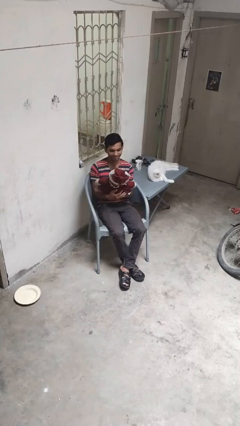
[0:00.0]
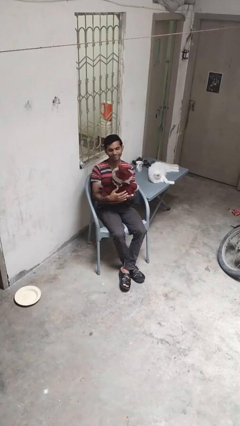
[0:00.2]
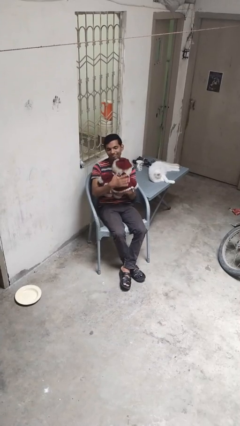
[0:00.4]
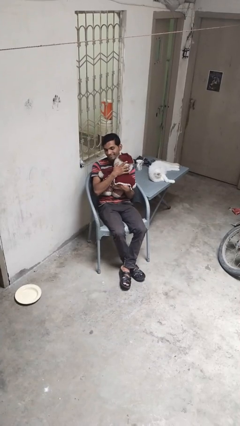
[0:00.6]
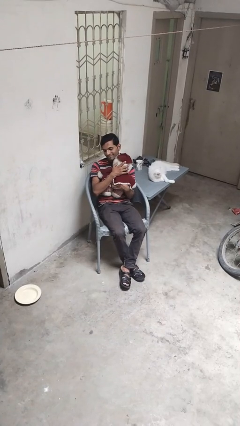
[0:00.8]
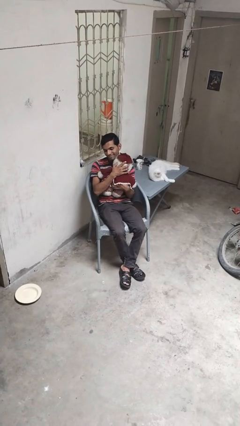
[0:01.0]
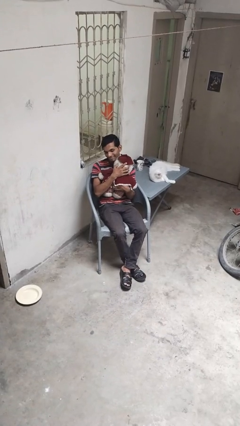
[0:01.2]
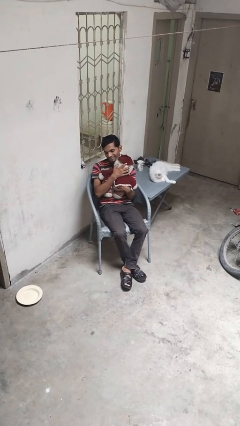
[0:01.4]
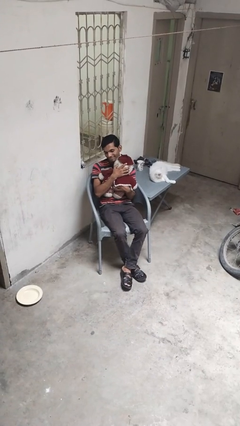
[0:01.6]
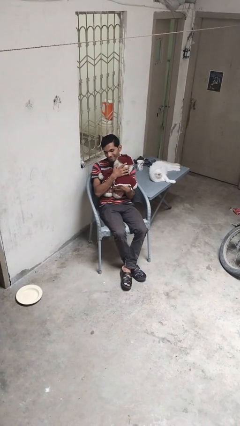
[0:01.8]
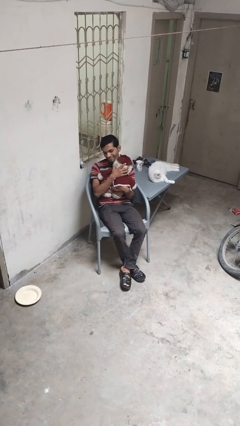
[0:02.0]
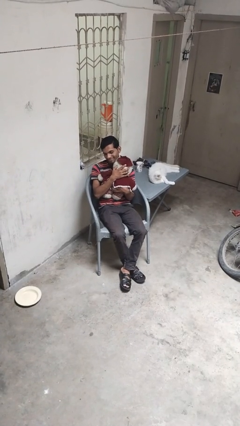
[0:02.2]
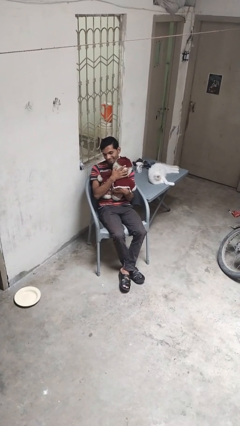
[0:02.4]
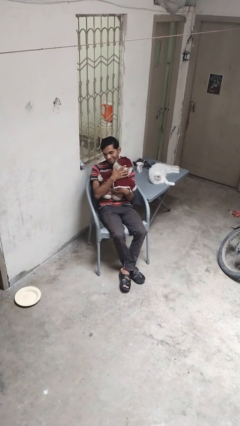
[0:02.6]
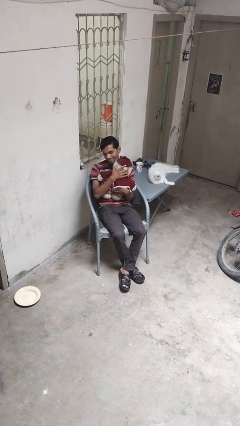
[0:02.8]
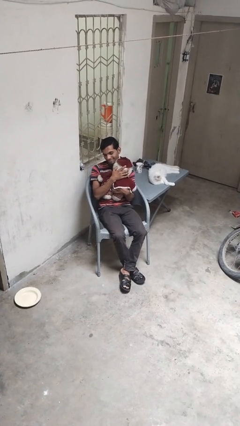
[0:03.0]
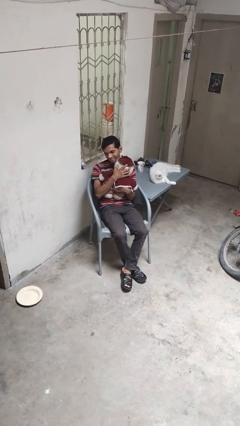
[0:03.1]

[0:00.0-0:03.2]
person hugs stuffed animal

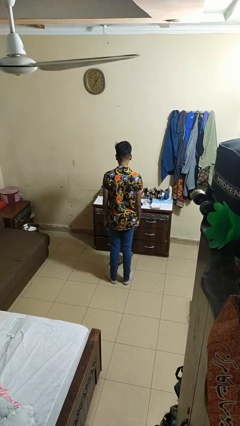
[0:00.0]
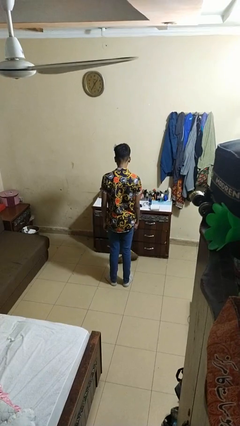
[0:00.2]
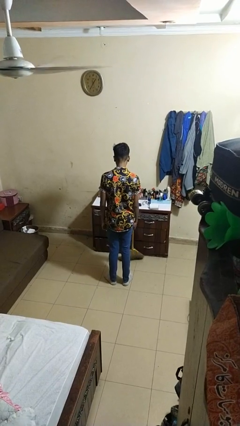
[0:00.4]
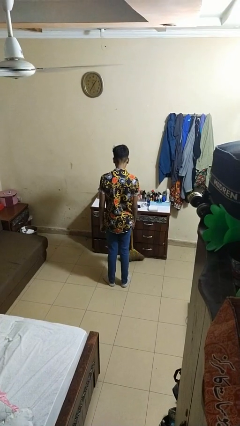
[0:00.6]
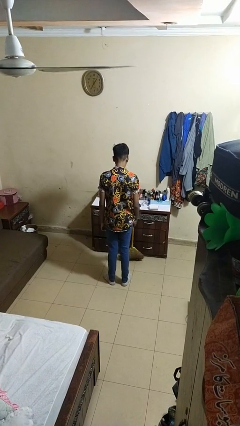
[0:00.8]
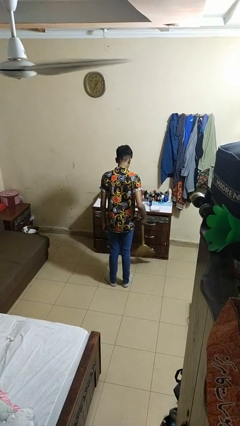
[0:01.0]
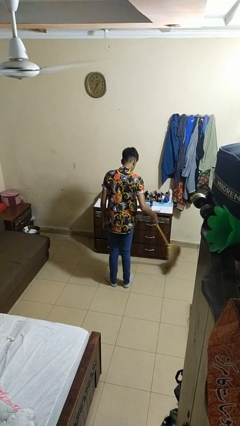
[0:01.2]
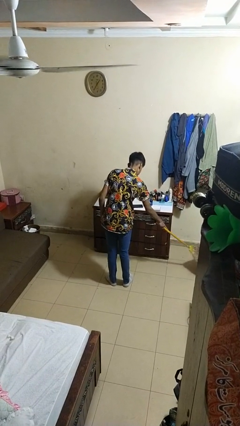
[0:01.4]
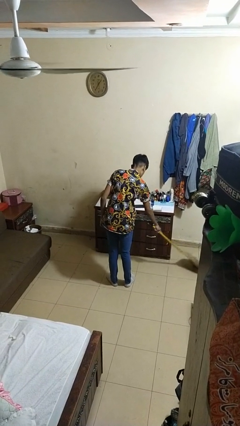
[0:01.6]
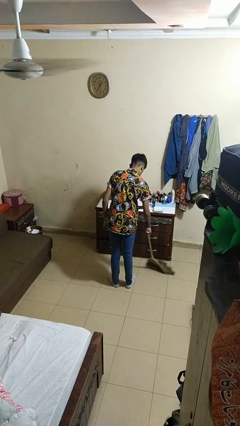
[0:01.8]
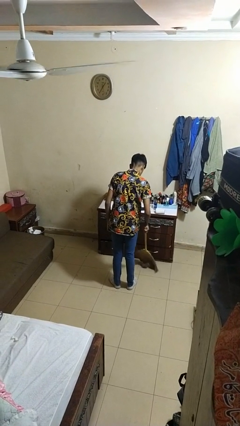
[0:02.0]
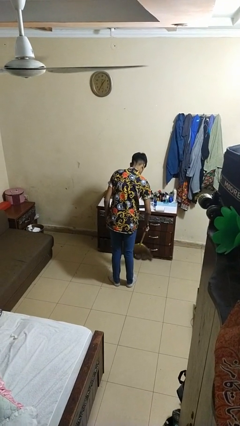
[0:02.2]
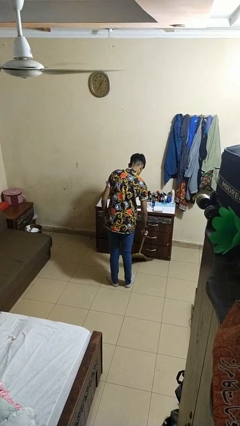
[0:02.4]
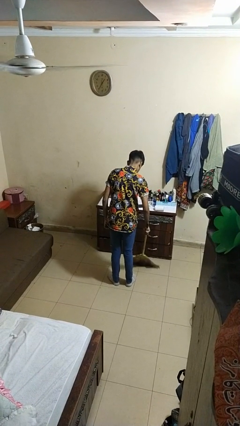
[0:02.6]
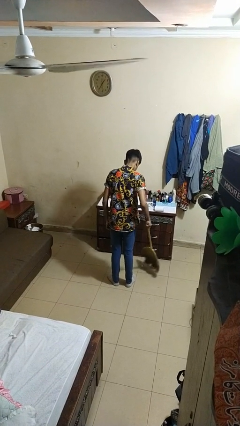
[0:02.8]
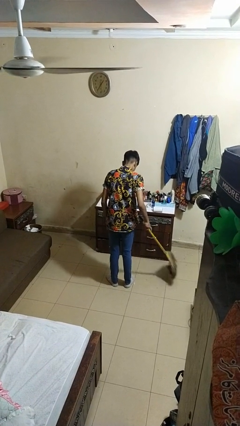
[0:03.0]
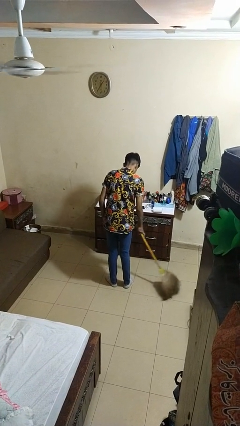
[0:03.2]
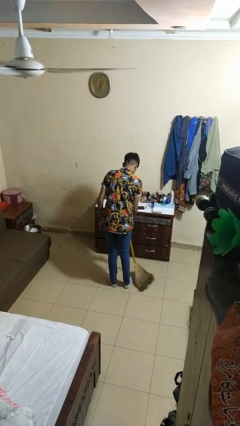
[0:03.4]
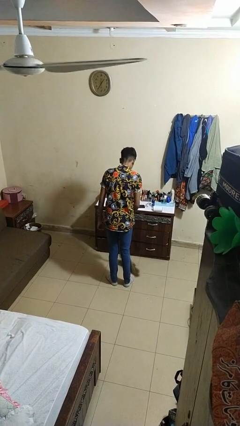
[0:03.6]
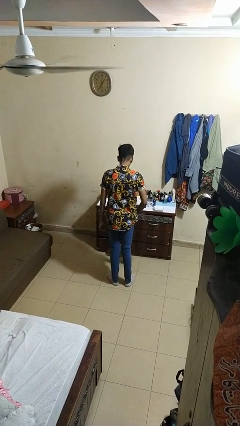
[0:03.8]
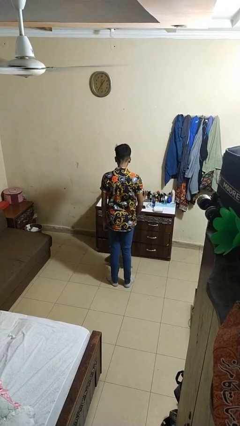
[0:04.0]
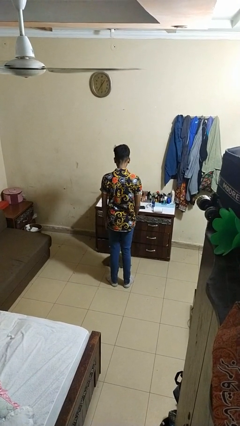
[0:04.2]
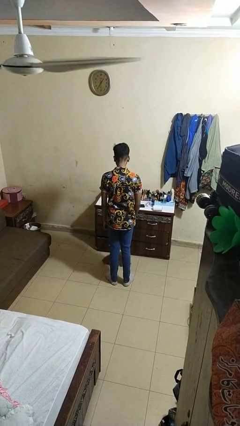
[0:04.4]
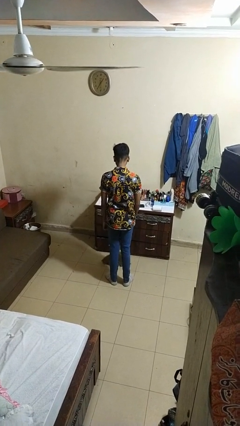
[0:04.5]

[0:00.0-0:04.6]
person sweeps floor

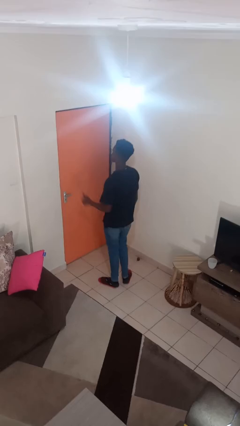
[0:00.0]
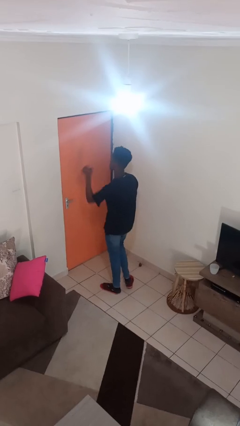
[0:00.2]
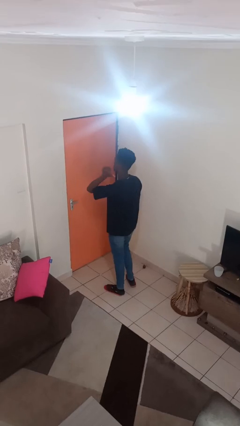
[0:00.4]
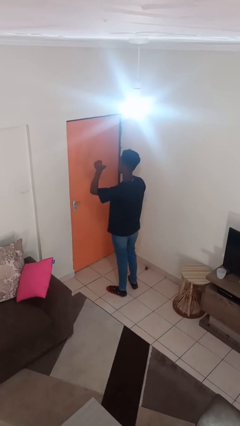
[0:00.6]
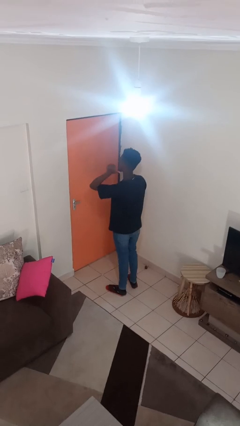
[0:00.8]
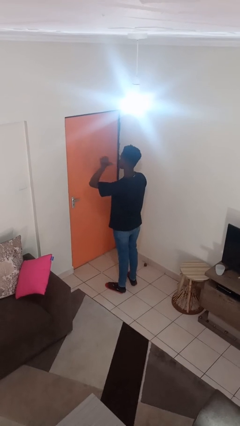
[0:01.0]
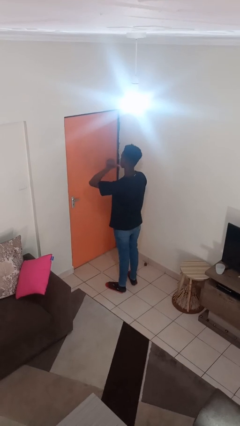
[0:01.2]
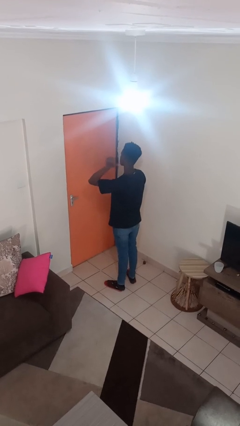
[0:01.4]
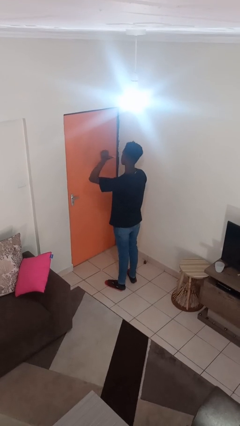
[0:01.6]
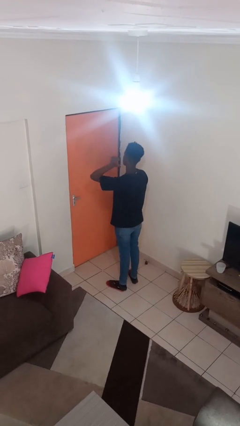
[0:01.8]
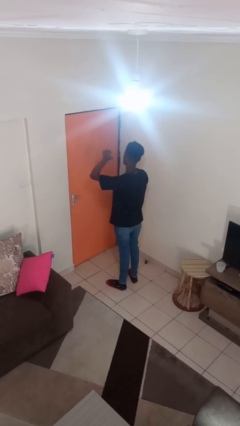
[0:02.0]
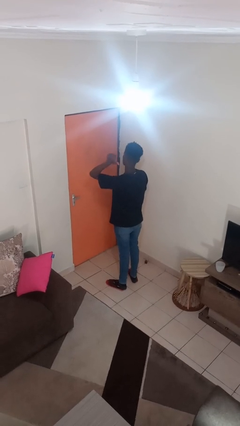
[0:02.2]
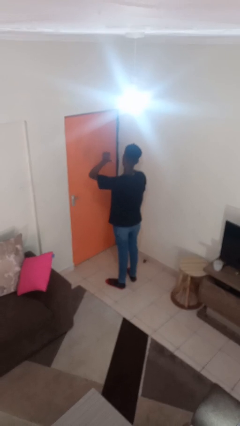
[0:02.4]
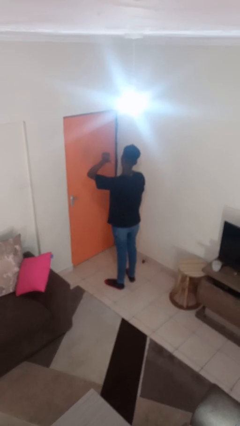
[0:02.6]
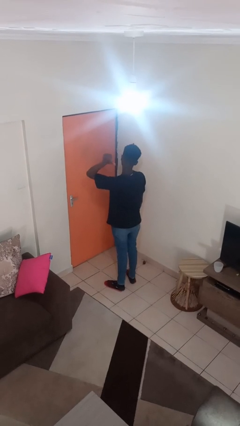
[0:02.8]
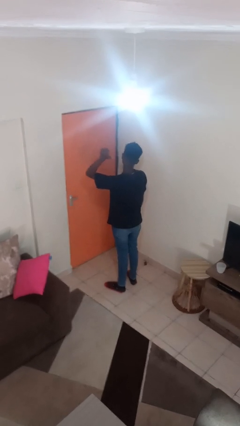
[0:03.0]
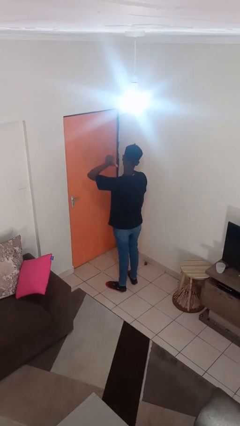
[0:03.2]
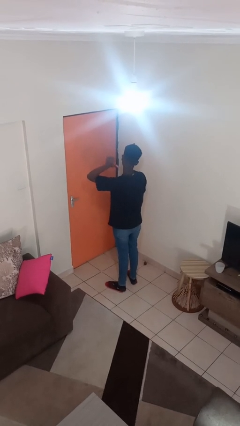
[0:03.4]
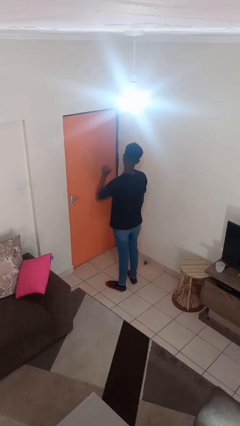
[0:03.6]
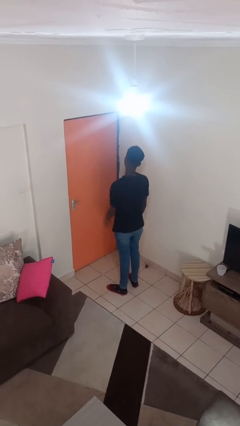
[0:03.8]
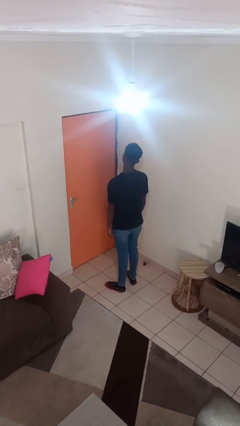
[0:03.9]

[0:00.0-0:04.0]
person gestures behind me

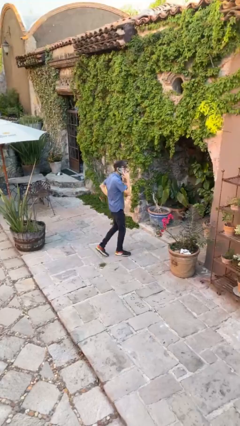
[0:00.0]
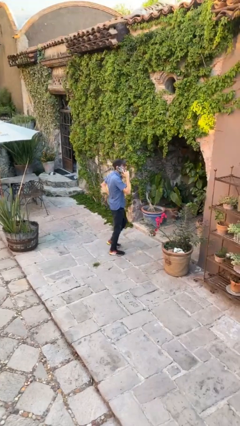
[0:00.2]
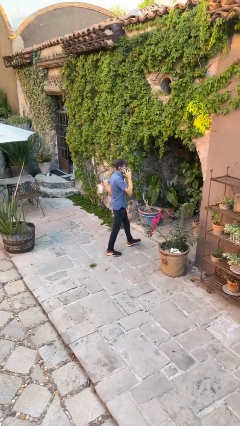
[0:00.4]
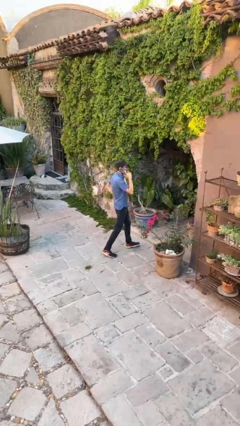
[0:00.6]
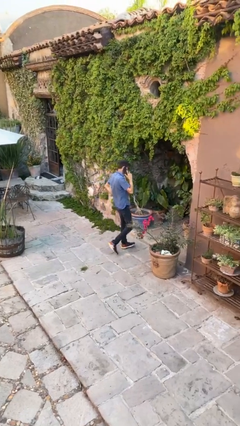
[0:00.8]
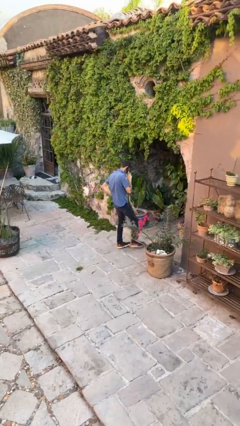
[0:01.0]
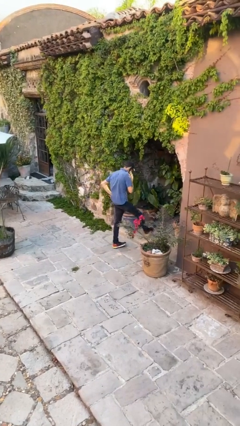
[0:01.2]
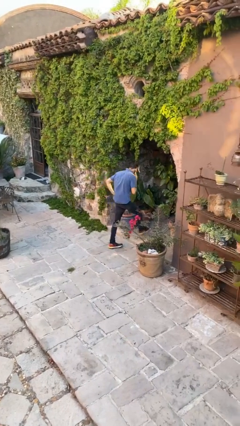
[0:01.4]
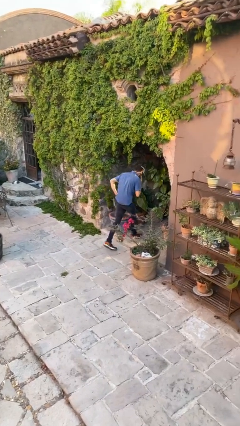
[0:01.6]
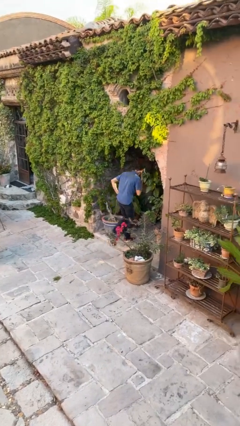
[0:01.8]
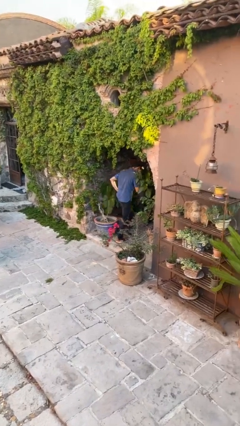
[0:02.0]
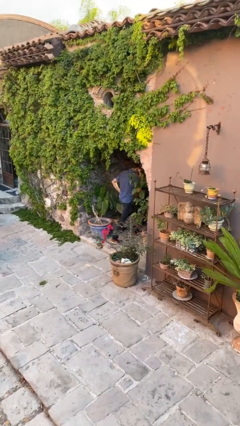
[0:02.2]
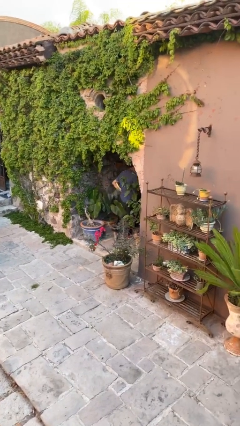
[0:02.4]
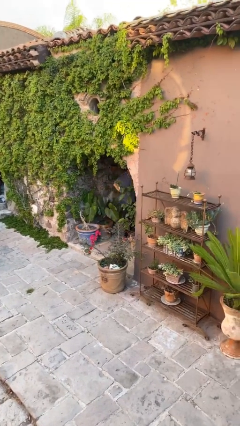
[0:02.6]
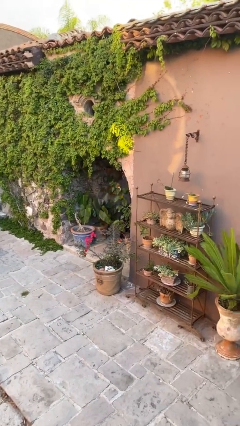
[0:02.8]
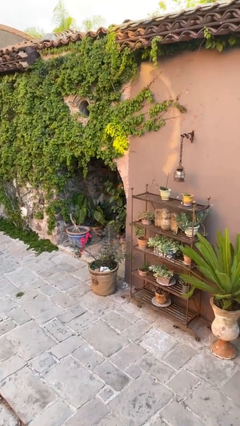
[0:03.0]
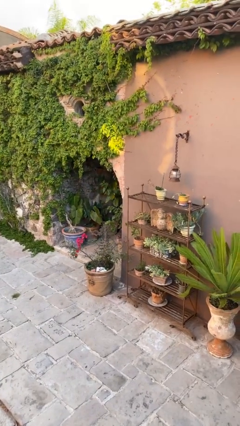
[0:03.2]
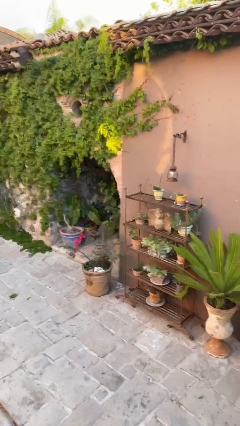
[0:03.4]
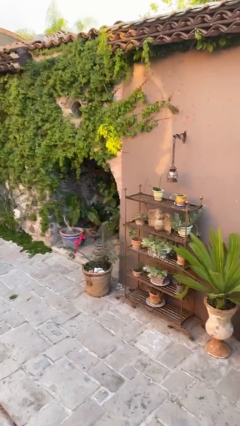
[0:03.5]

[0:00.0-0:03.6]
person exits scene through structure

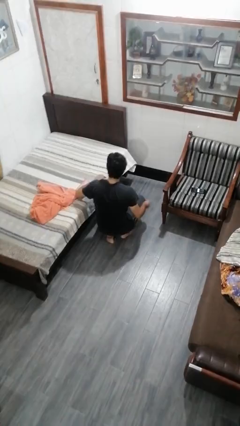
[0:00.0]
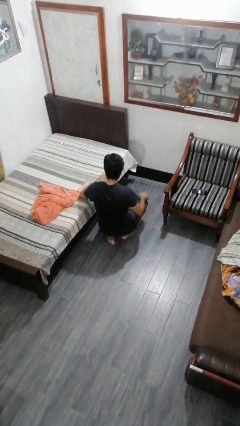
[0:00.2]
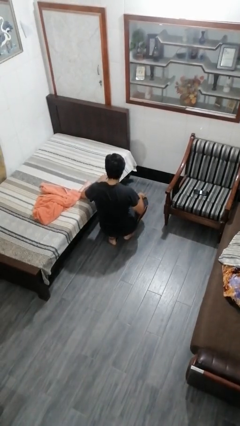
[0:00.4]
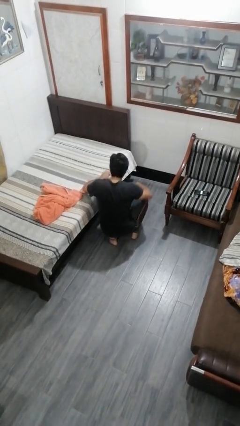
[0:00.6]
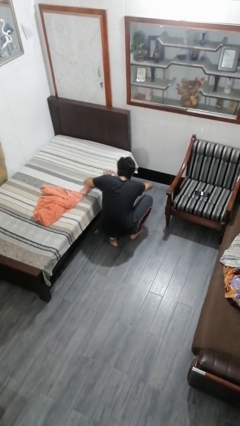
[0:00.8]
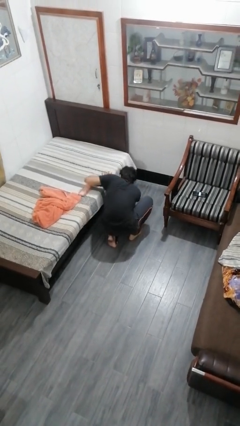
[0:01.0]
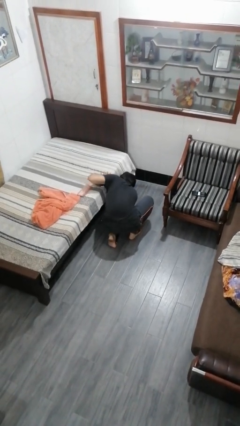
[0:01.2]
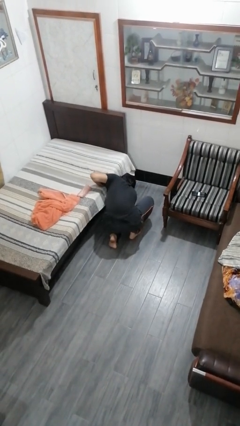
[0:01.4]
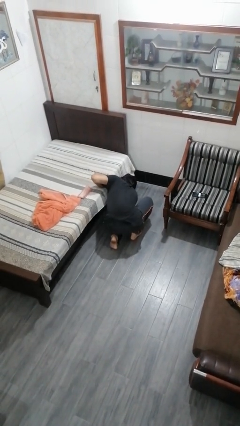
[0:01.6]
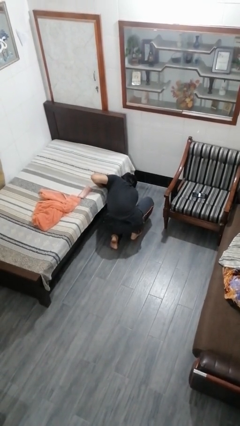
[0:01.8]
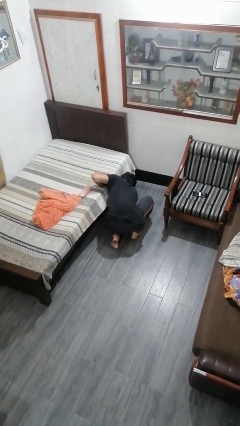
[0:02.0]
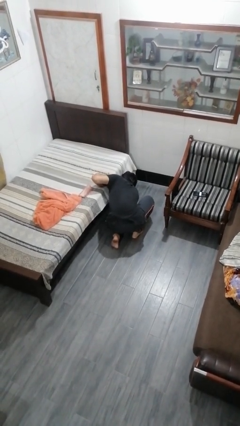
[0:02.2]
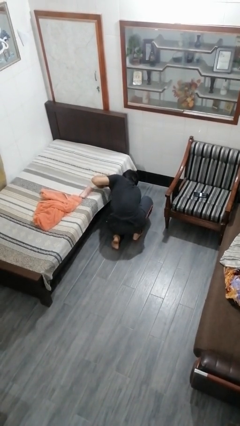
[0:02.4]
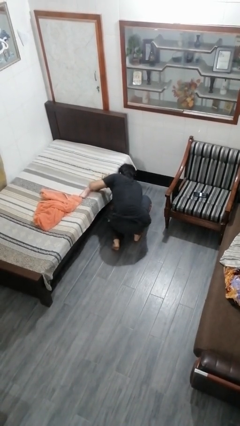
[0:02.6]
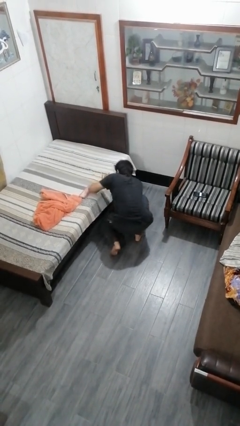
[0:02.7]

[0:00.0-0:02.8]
person searches under bed
